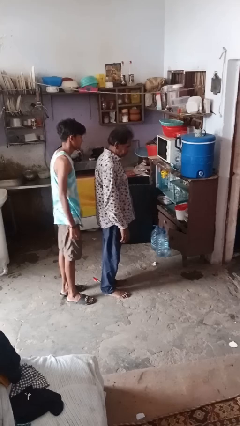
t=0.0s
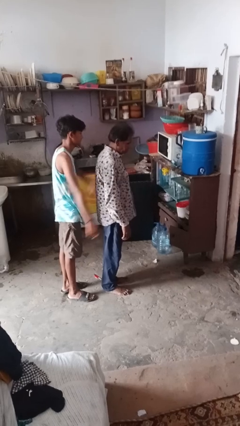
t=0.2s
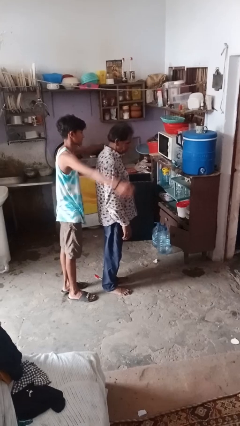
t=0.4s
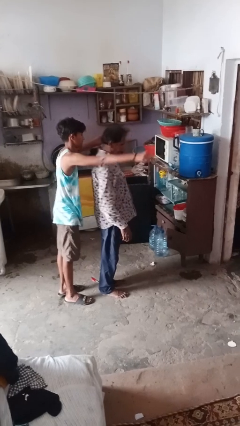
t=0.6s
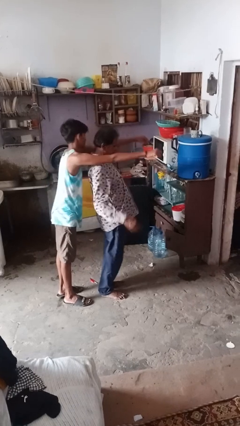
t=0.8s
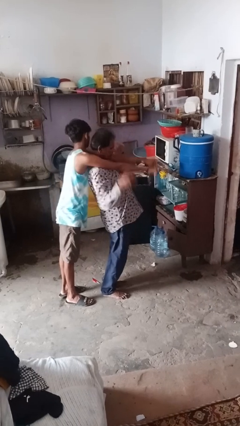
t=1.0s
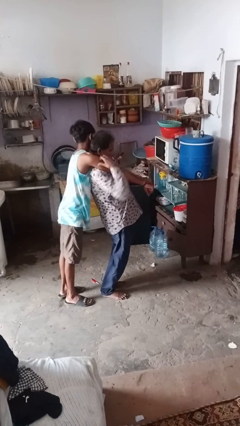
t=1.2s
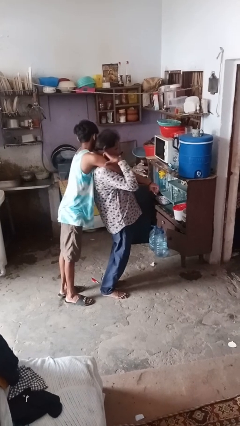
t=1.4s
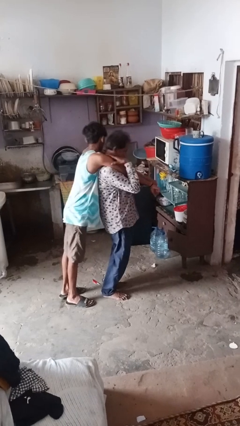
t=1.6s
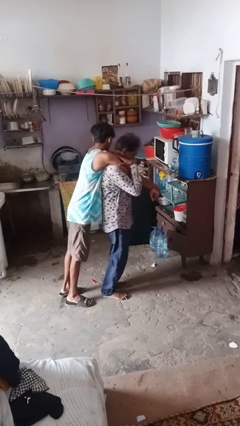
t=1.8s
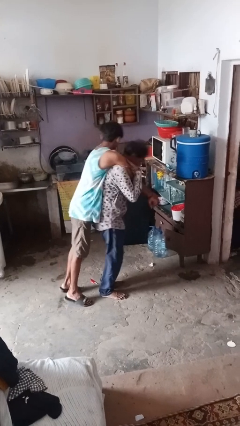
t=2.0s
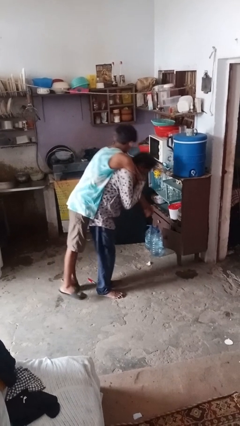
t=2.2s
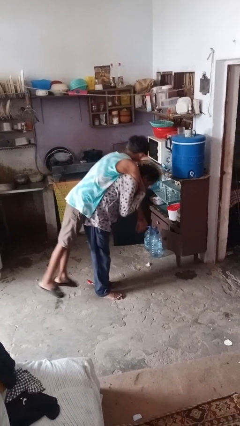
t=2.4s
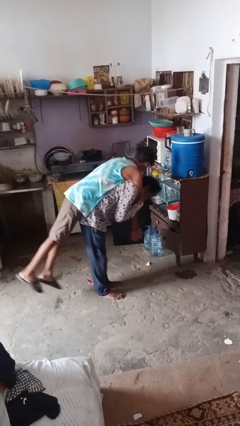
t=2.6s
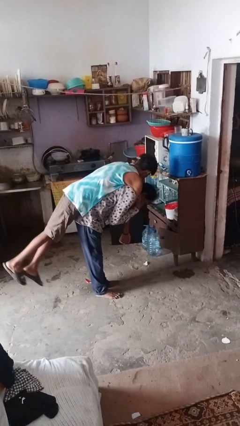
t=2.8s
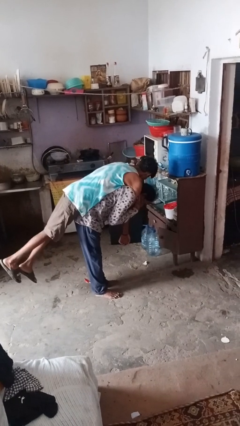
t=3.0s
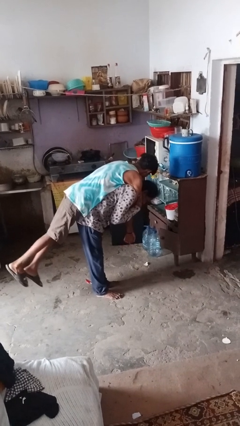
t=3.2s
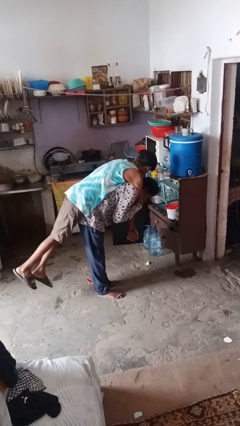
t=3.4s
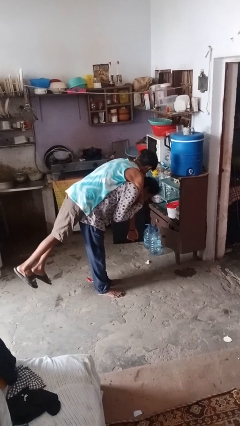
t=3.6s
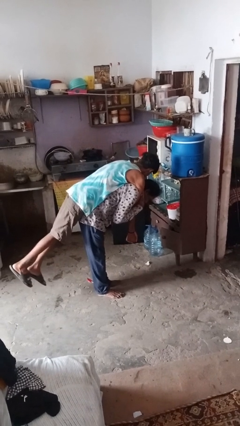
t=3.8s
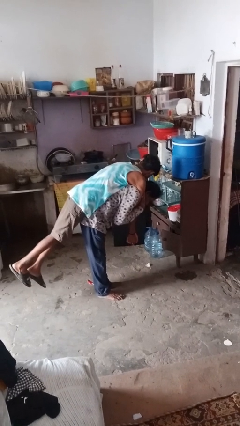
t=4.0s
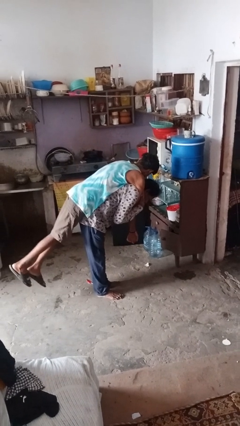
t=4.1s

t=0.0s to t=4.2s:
person carries person over shoulder

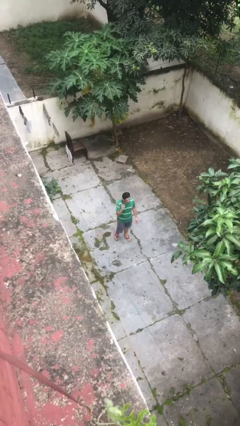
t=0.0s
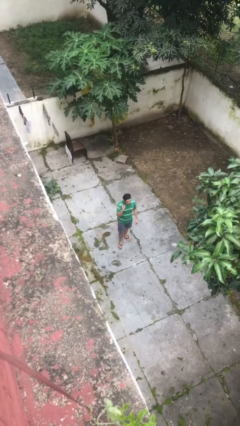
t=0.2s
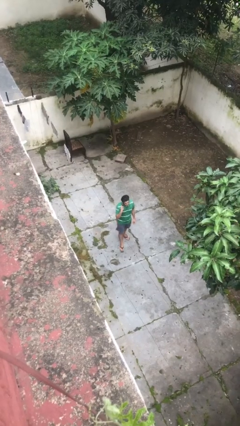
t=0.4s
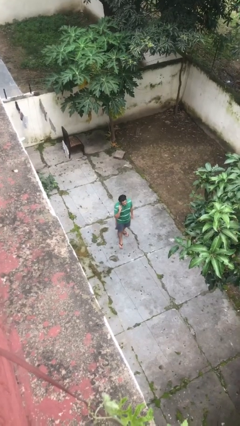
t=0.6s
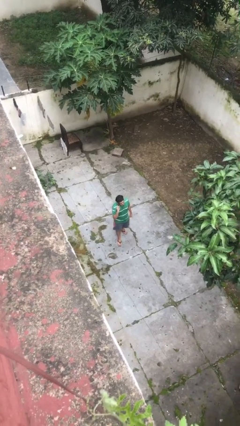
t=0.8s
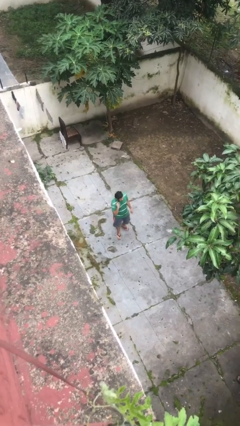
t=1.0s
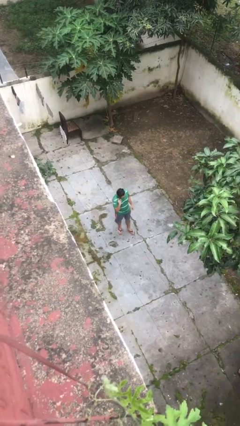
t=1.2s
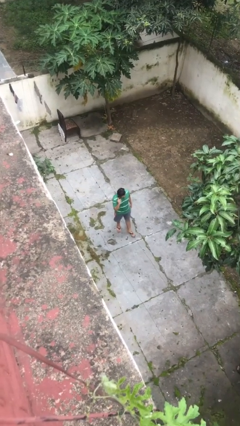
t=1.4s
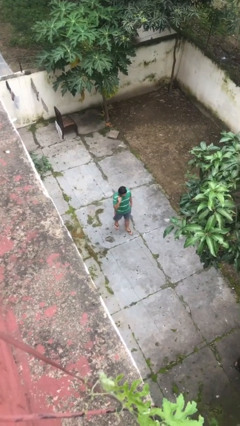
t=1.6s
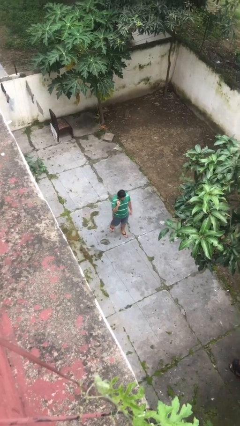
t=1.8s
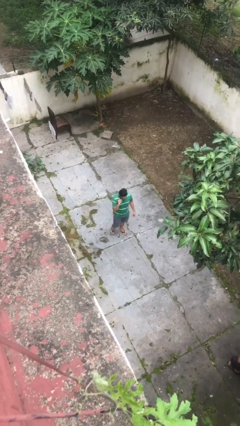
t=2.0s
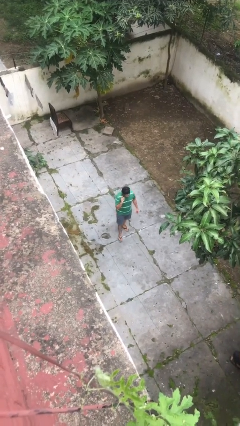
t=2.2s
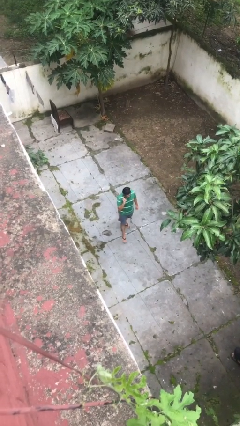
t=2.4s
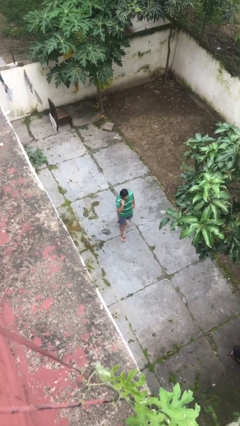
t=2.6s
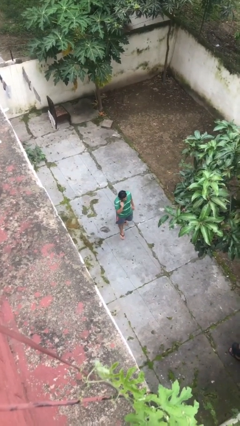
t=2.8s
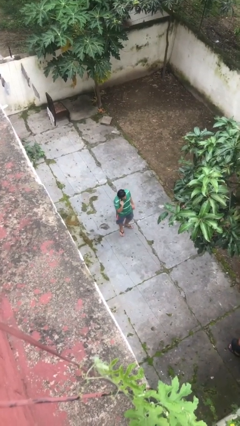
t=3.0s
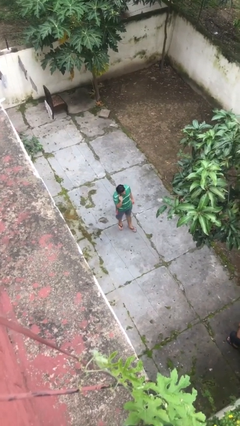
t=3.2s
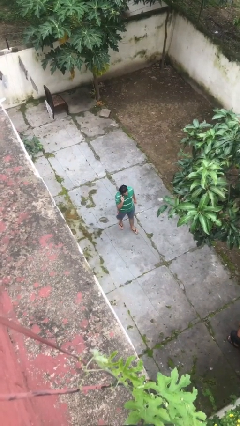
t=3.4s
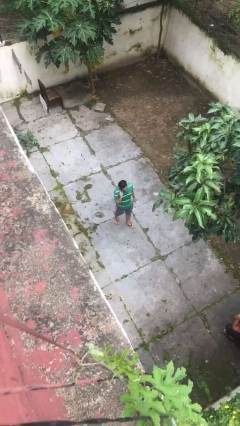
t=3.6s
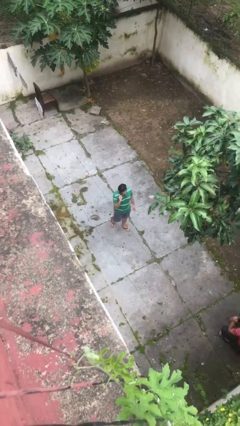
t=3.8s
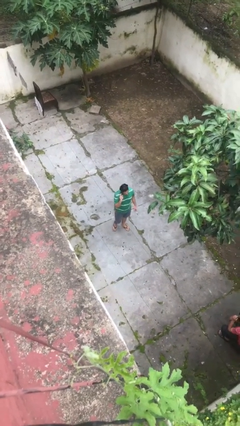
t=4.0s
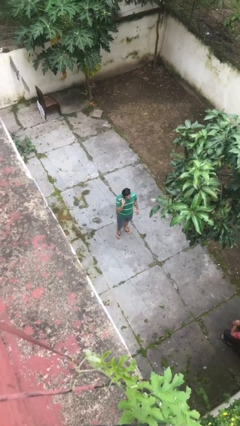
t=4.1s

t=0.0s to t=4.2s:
person talks on phone

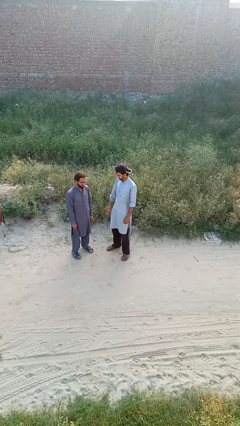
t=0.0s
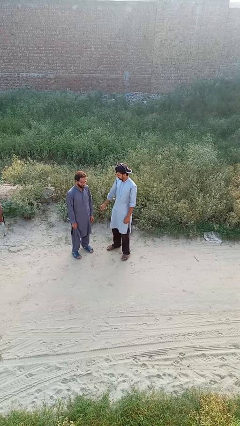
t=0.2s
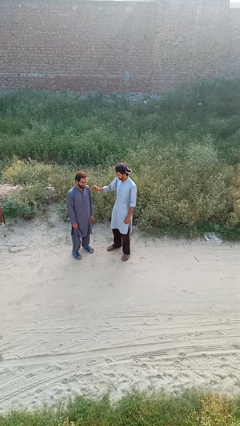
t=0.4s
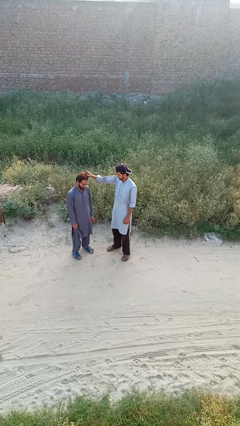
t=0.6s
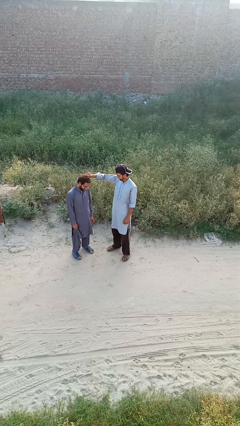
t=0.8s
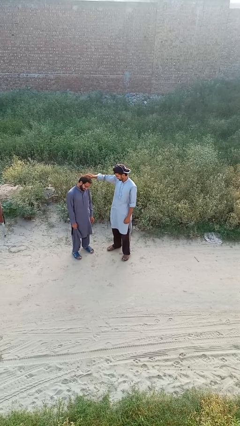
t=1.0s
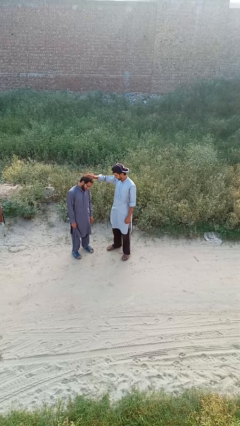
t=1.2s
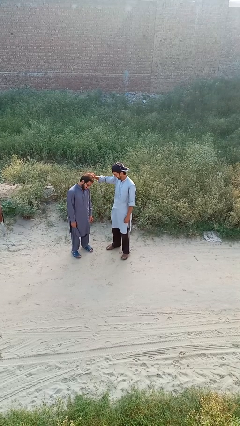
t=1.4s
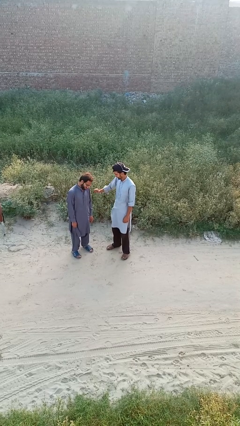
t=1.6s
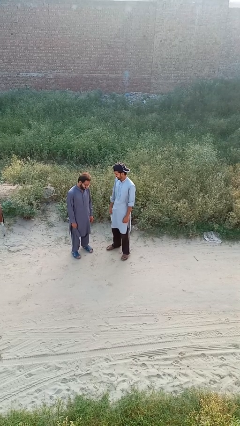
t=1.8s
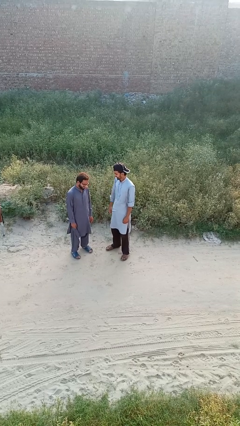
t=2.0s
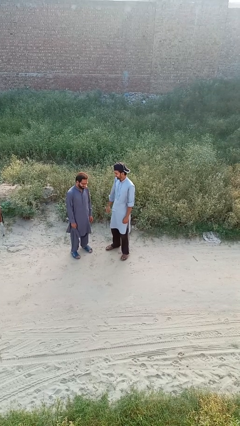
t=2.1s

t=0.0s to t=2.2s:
person grabs person by hair

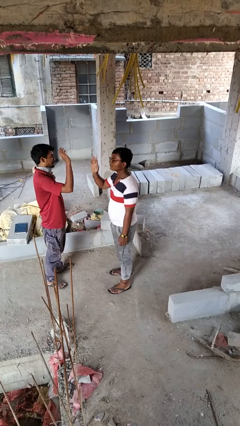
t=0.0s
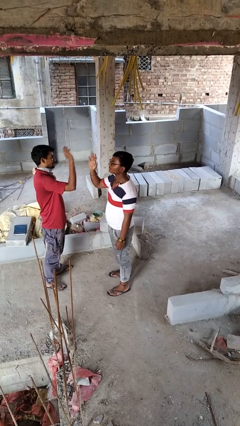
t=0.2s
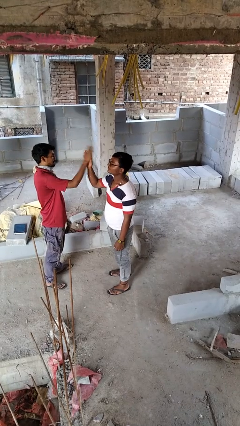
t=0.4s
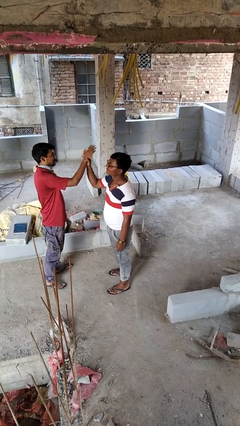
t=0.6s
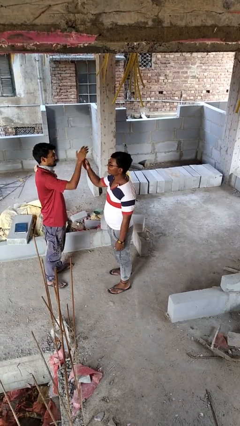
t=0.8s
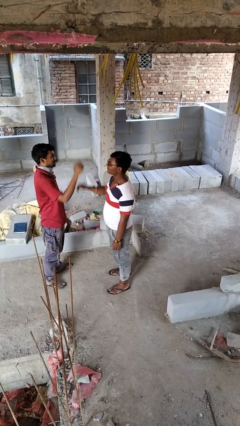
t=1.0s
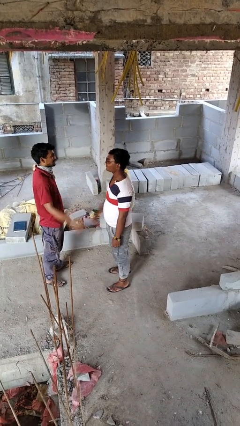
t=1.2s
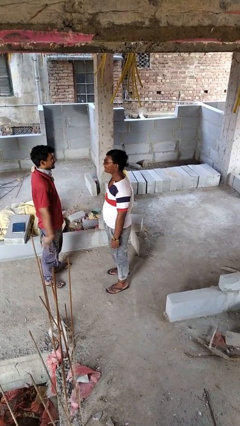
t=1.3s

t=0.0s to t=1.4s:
person highfives hand

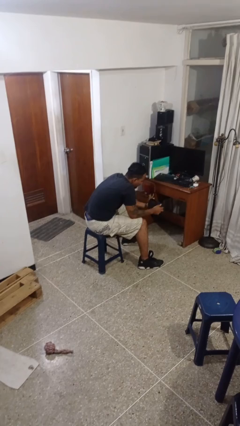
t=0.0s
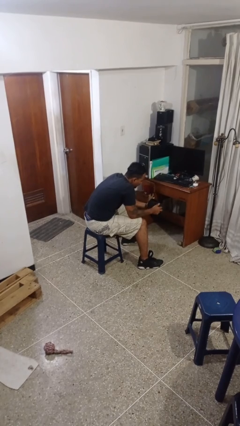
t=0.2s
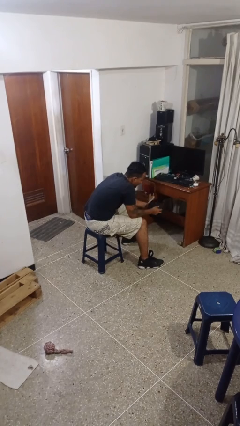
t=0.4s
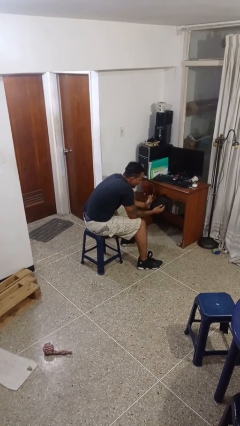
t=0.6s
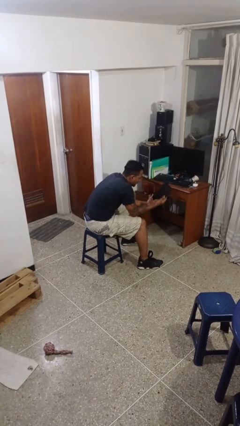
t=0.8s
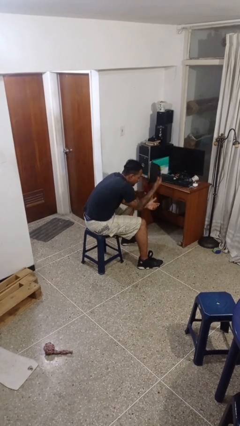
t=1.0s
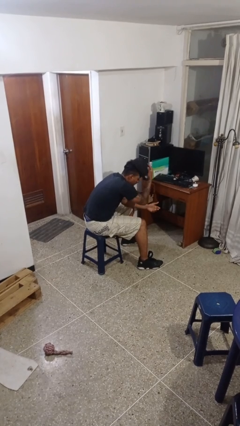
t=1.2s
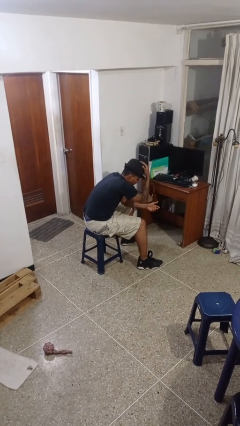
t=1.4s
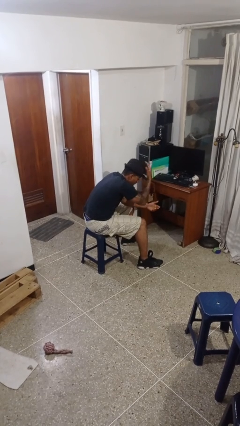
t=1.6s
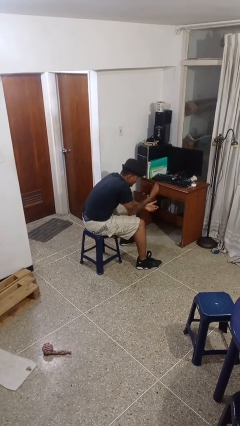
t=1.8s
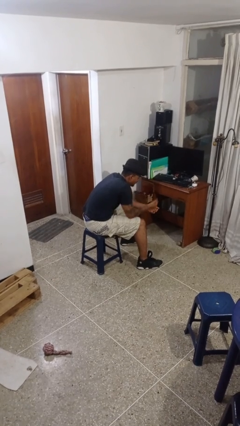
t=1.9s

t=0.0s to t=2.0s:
person puts on hat

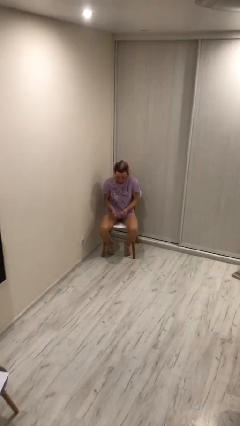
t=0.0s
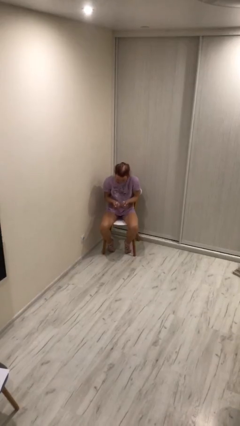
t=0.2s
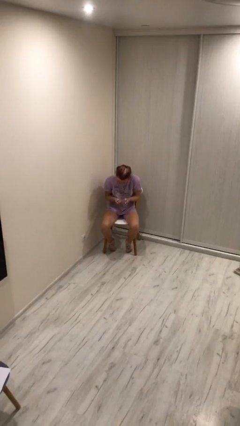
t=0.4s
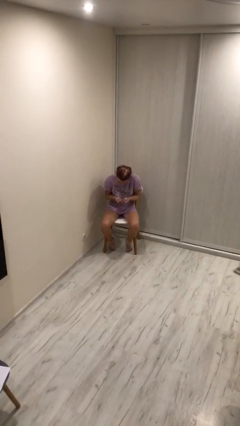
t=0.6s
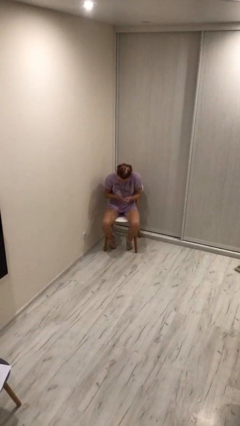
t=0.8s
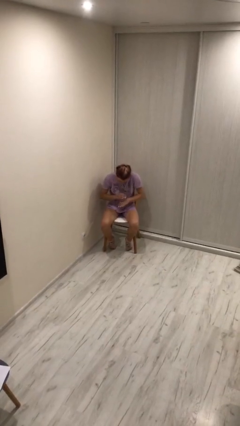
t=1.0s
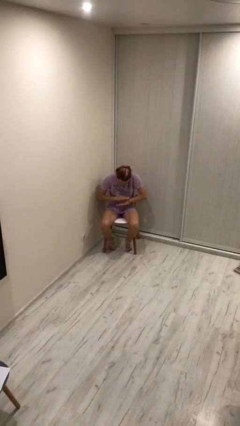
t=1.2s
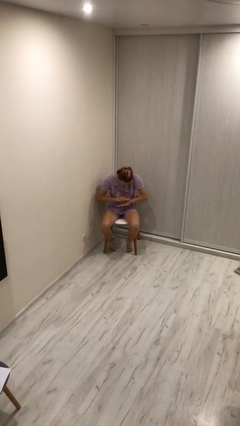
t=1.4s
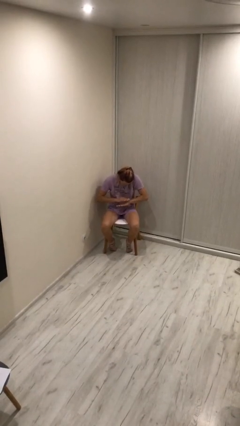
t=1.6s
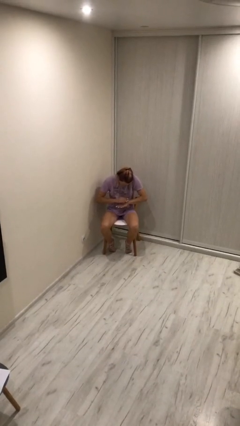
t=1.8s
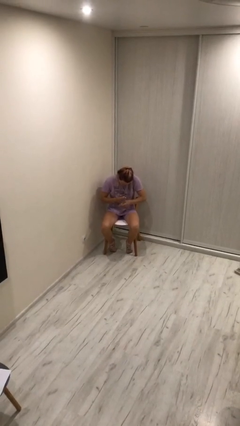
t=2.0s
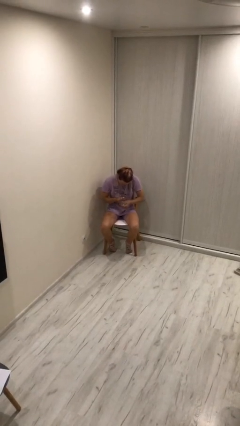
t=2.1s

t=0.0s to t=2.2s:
person looks at hands in lap

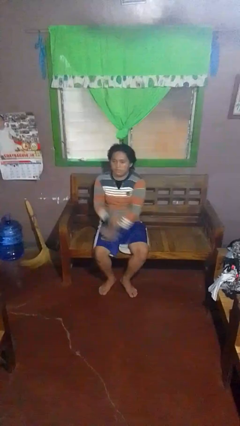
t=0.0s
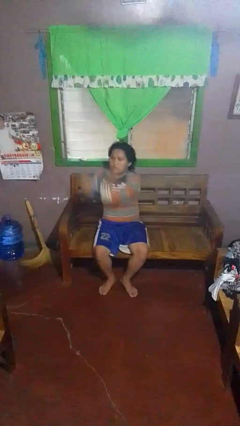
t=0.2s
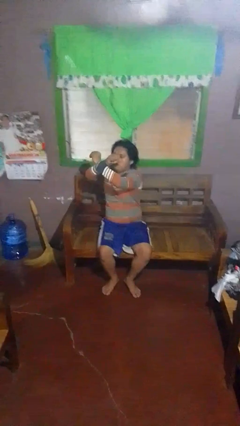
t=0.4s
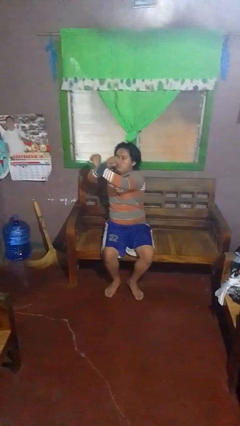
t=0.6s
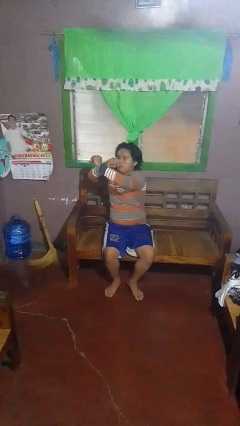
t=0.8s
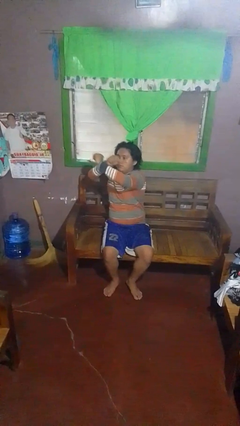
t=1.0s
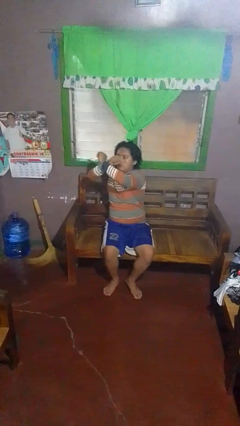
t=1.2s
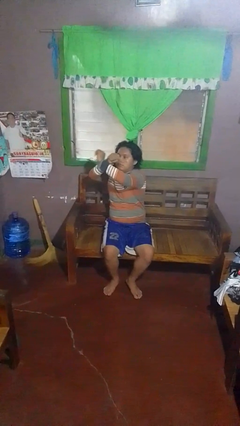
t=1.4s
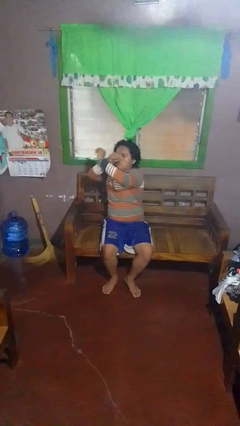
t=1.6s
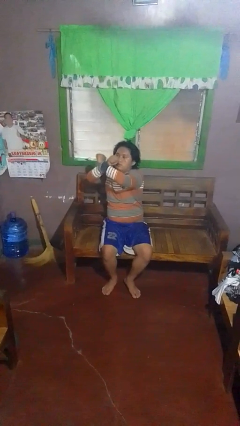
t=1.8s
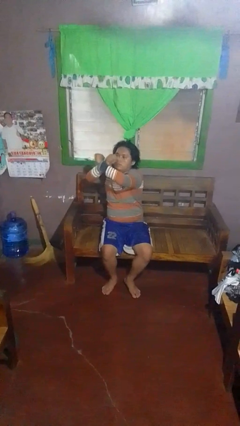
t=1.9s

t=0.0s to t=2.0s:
person gestures arms x
